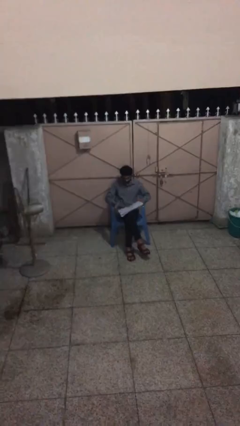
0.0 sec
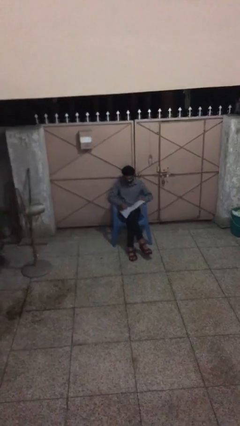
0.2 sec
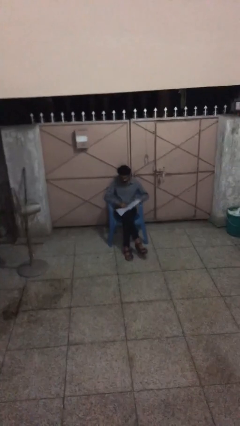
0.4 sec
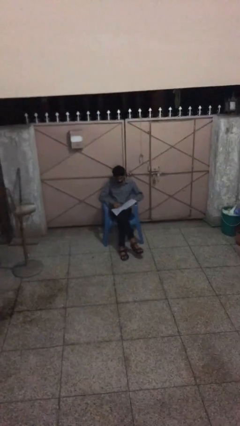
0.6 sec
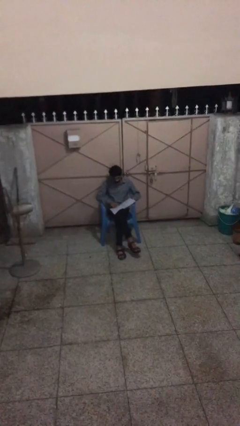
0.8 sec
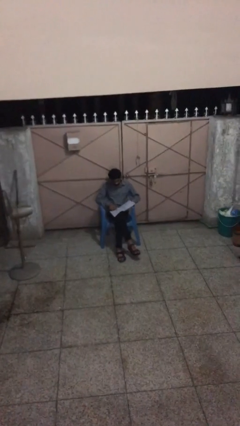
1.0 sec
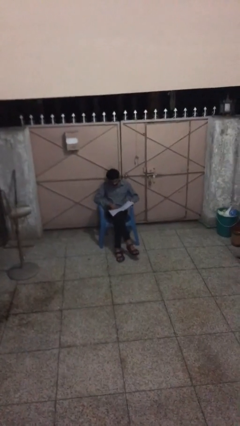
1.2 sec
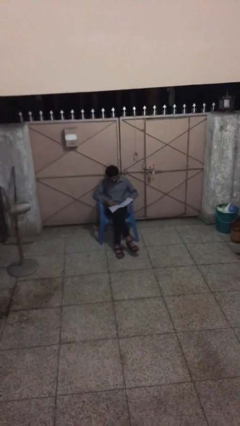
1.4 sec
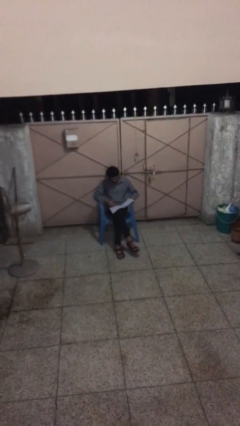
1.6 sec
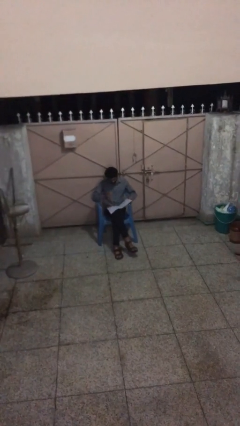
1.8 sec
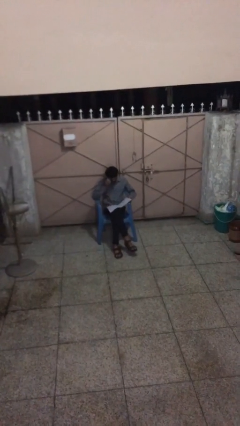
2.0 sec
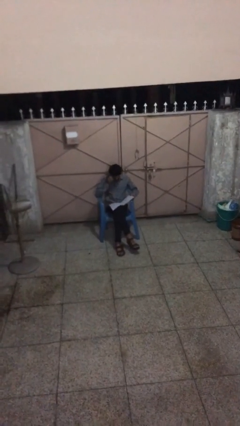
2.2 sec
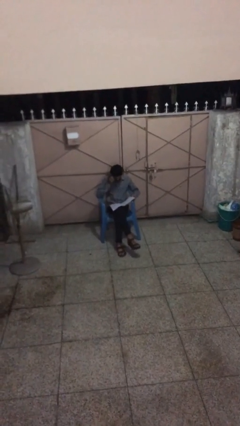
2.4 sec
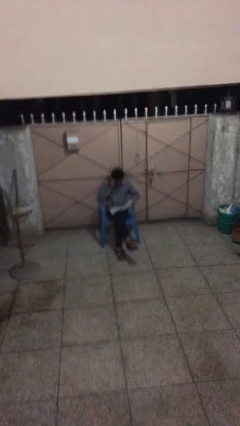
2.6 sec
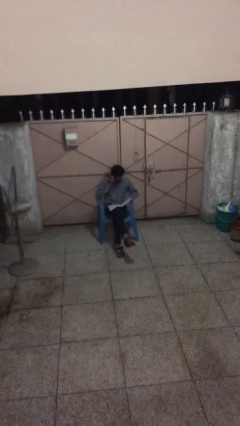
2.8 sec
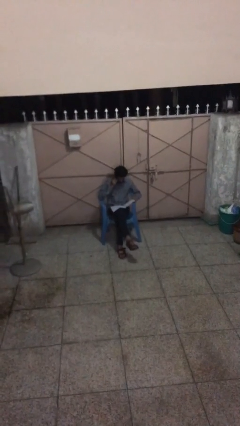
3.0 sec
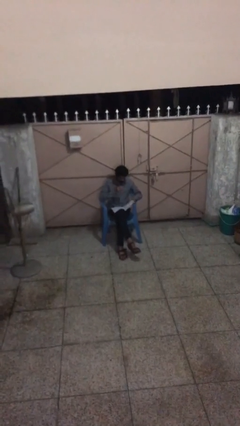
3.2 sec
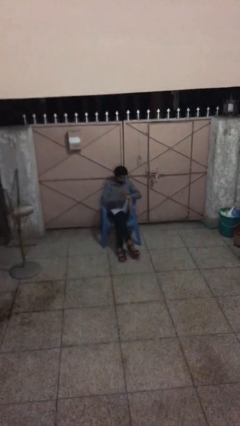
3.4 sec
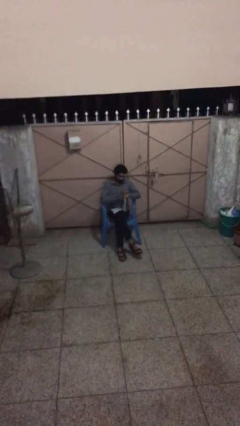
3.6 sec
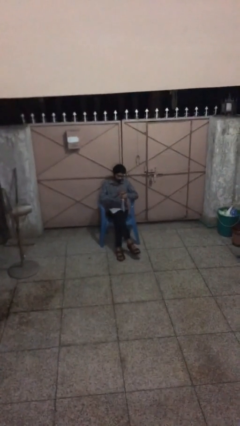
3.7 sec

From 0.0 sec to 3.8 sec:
person reads document

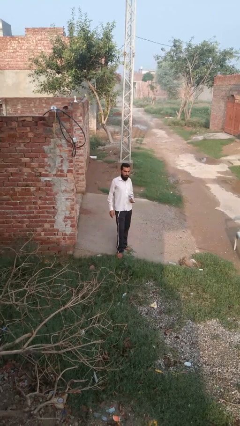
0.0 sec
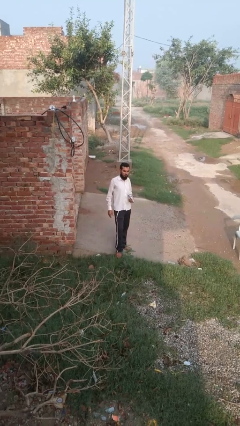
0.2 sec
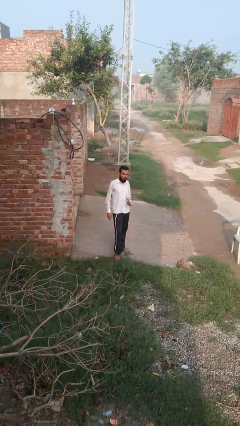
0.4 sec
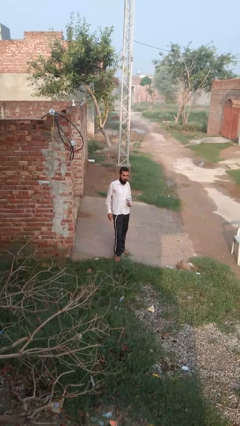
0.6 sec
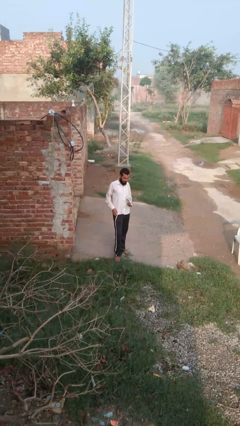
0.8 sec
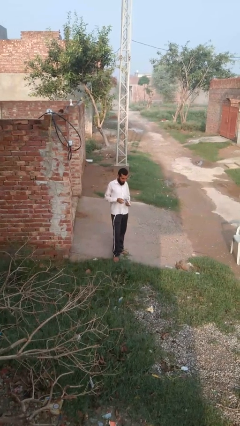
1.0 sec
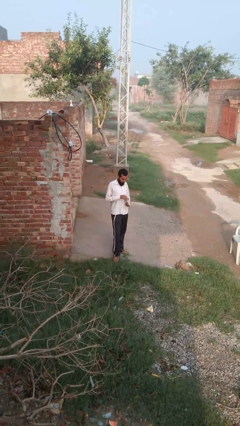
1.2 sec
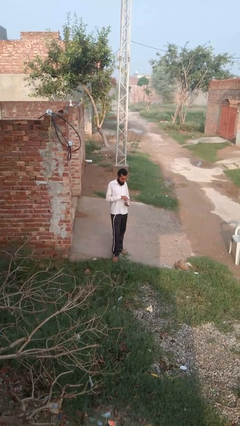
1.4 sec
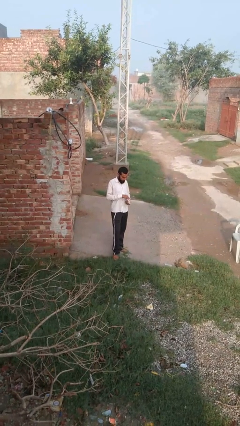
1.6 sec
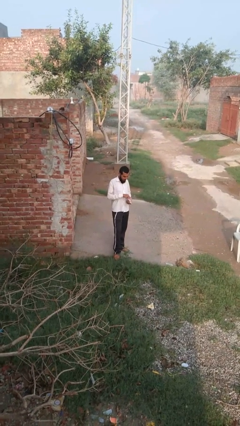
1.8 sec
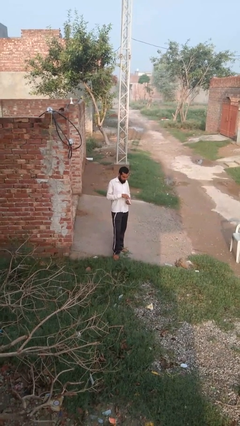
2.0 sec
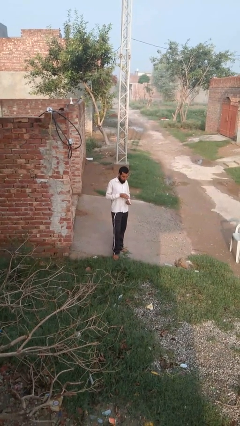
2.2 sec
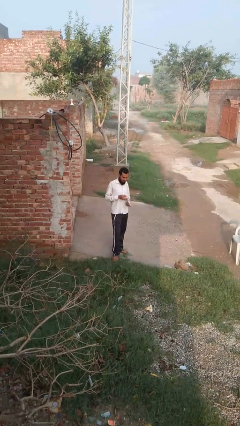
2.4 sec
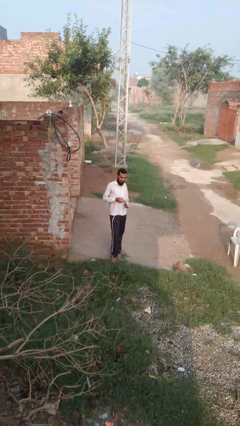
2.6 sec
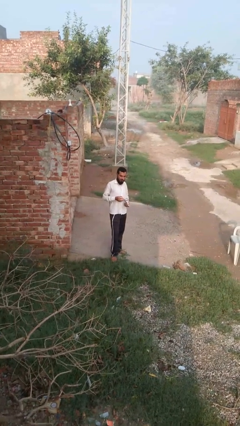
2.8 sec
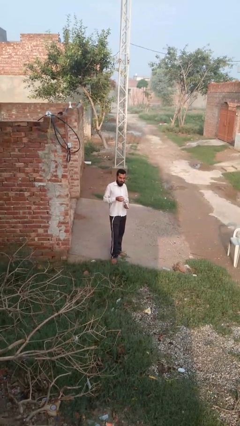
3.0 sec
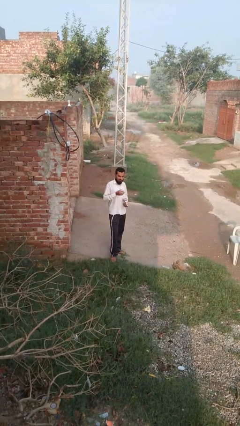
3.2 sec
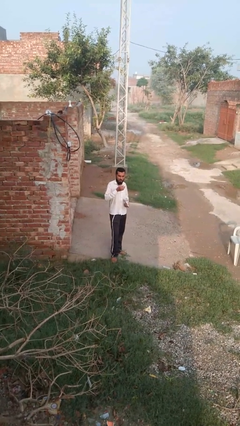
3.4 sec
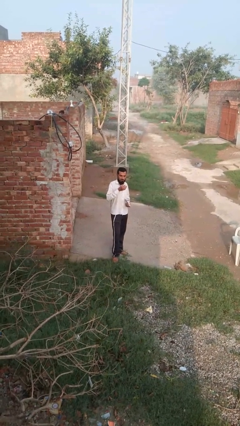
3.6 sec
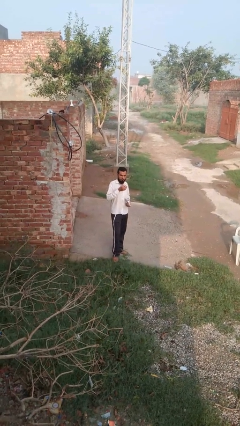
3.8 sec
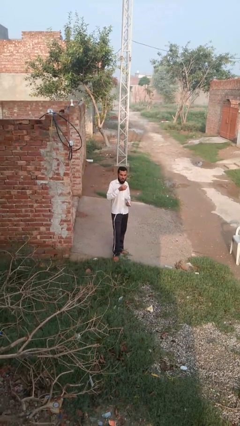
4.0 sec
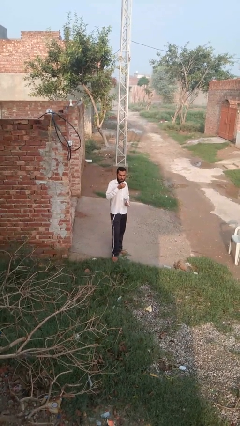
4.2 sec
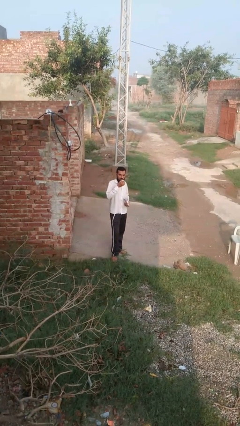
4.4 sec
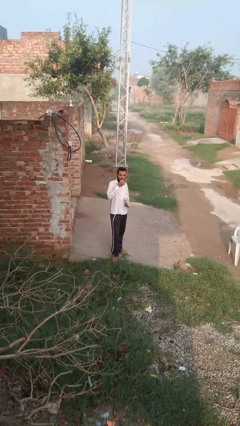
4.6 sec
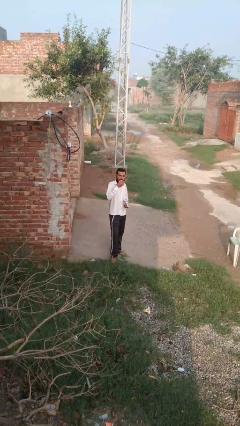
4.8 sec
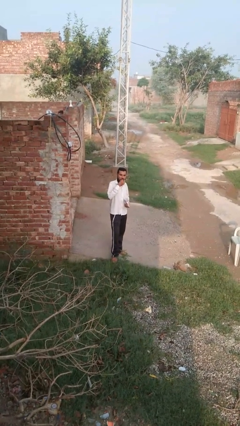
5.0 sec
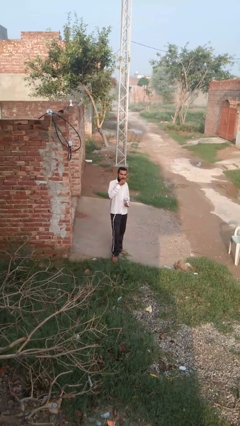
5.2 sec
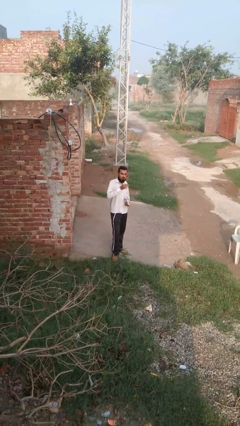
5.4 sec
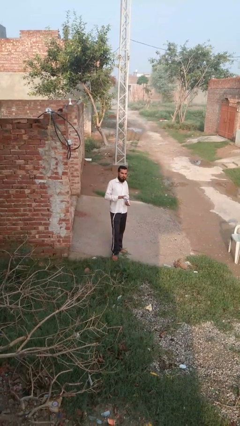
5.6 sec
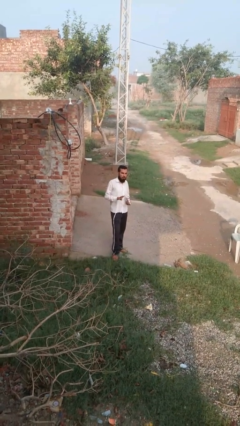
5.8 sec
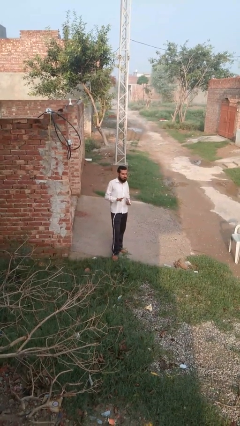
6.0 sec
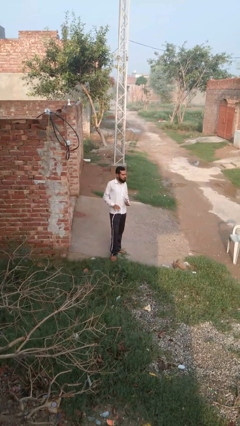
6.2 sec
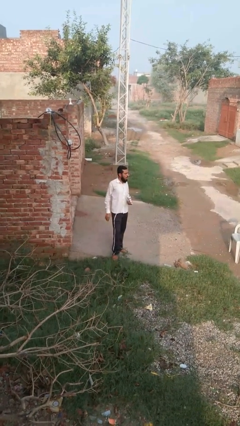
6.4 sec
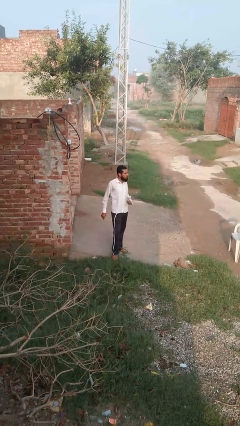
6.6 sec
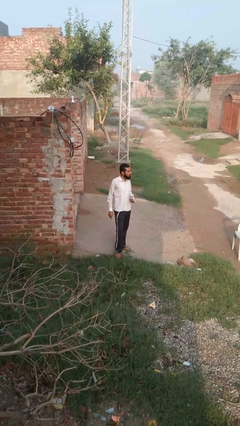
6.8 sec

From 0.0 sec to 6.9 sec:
person eats snack from bag

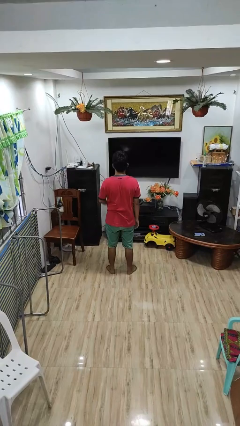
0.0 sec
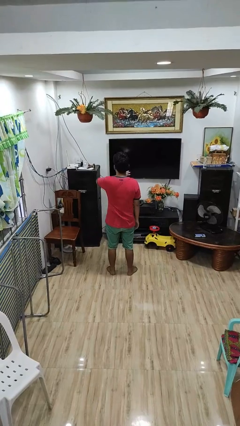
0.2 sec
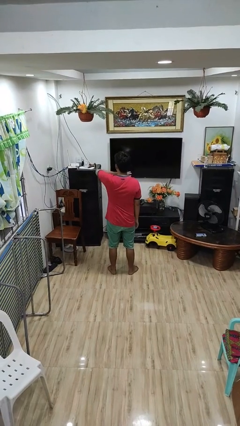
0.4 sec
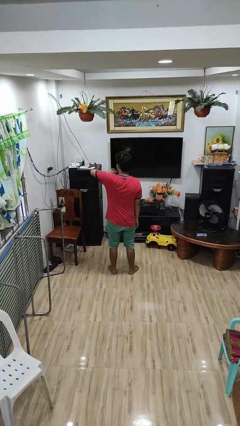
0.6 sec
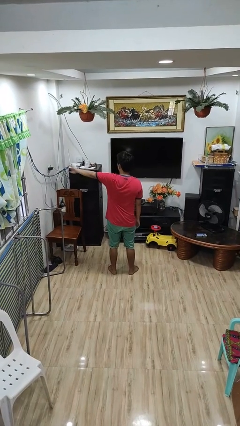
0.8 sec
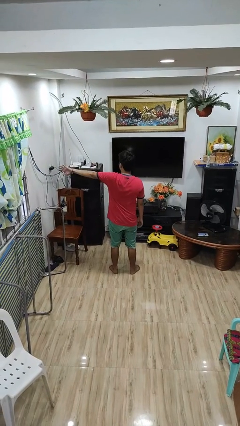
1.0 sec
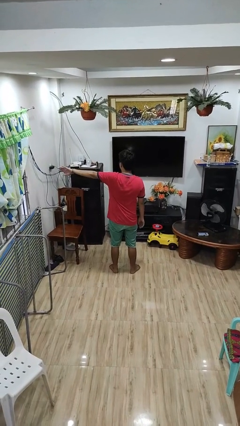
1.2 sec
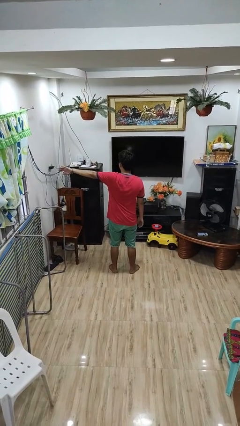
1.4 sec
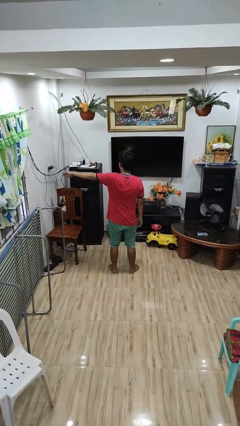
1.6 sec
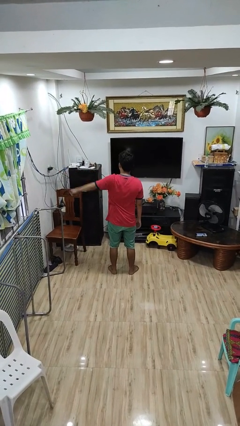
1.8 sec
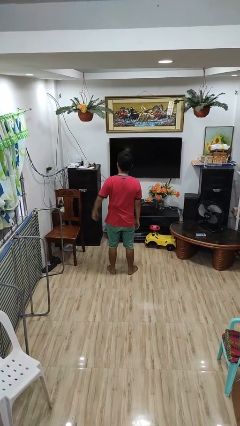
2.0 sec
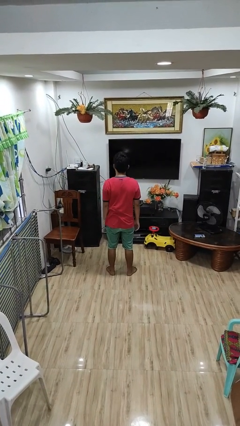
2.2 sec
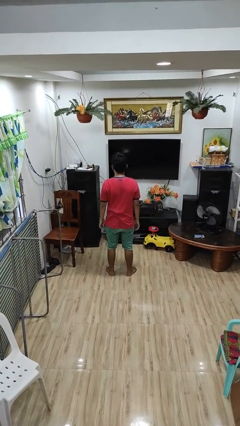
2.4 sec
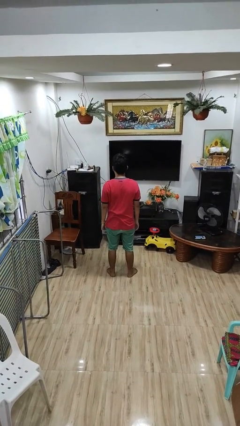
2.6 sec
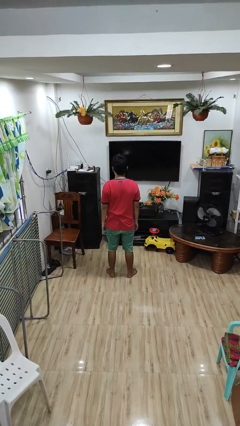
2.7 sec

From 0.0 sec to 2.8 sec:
person gestures swipe left

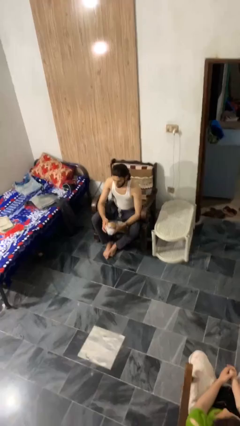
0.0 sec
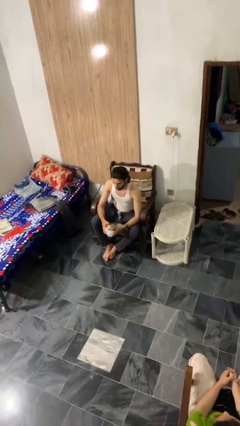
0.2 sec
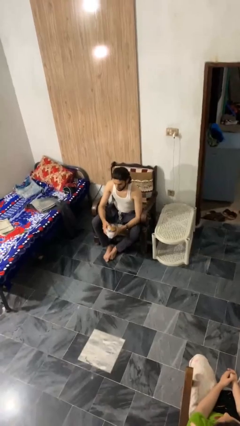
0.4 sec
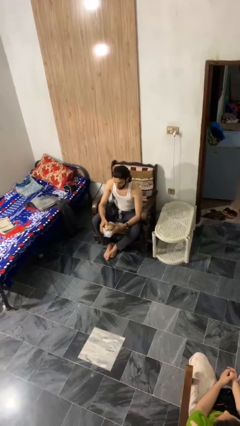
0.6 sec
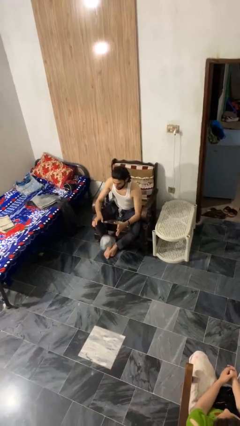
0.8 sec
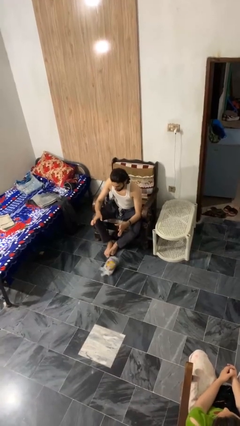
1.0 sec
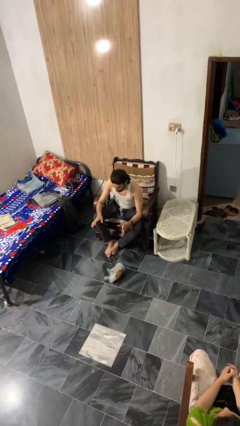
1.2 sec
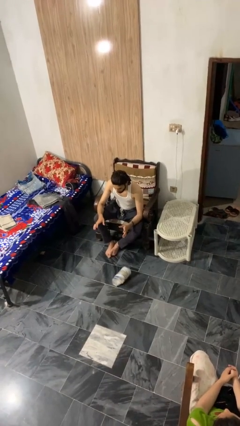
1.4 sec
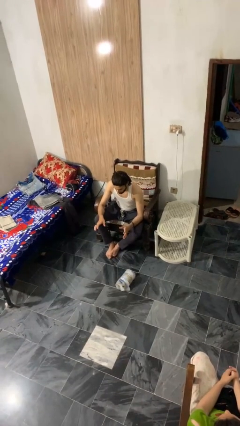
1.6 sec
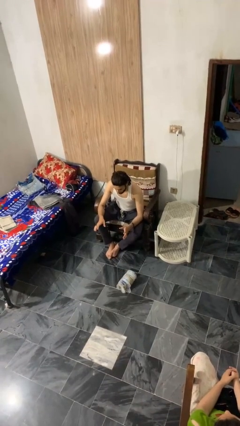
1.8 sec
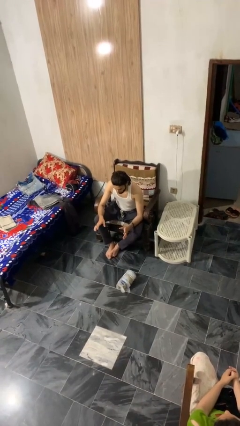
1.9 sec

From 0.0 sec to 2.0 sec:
person drops object

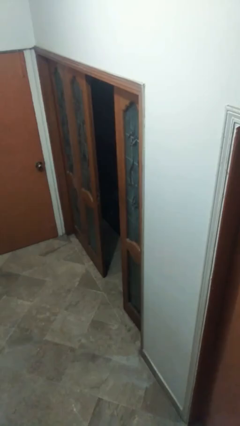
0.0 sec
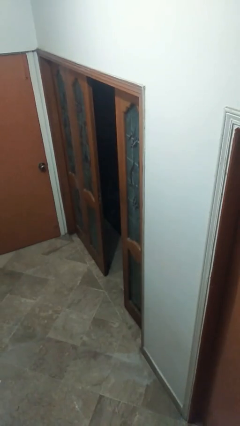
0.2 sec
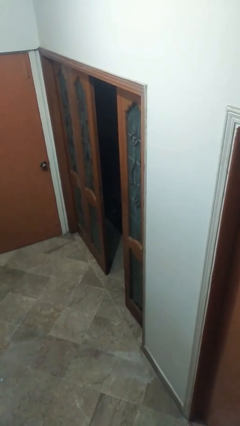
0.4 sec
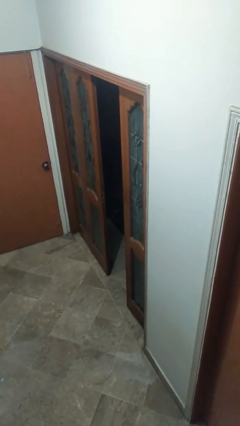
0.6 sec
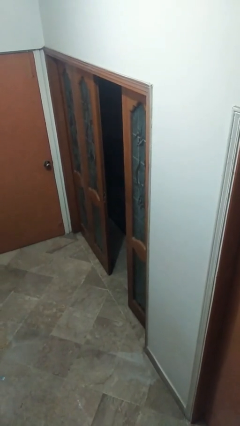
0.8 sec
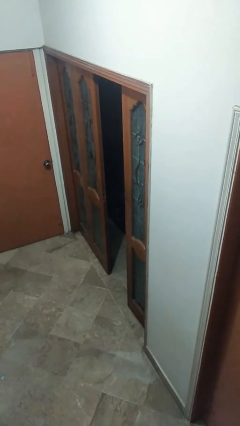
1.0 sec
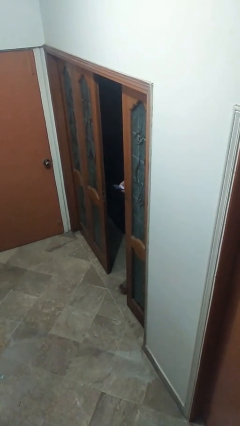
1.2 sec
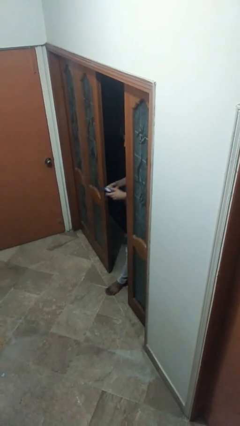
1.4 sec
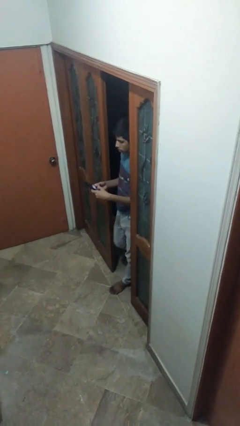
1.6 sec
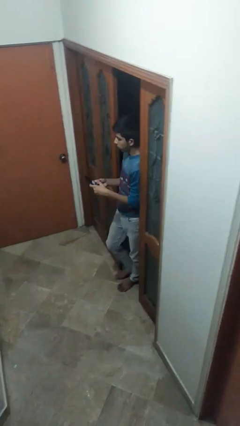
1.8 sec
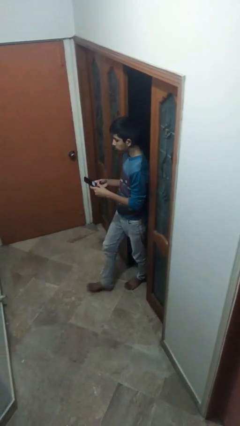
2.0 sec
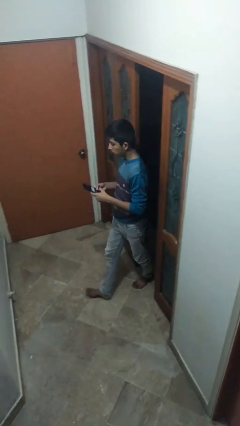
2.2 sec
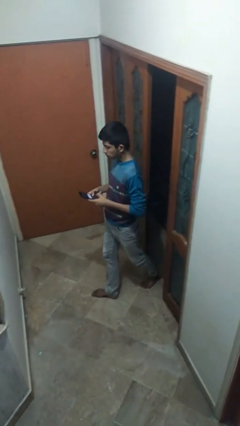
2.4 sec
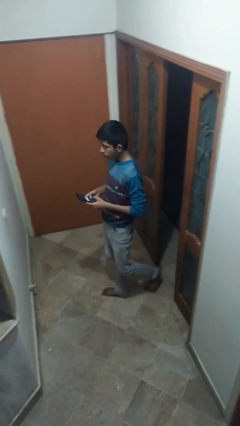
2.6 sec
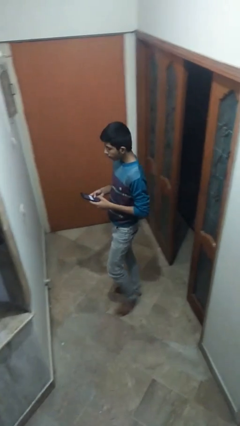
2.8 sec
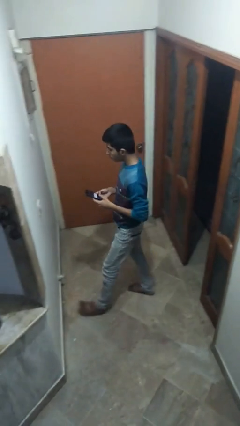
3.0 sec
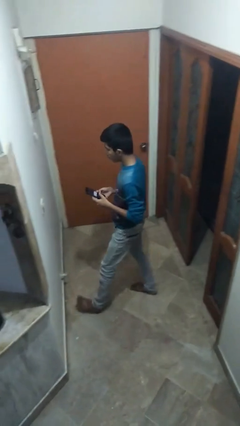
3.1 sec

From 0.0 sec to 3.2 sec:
person enters scene through structure
